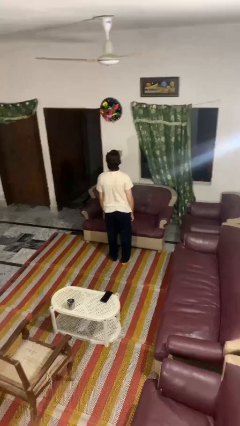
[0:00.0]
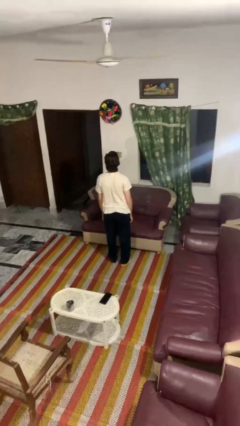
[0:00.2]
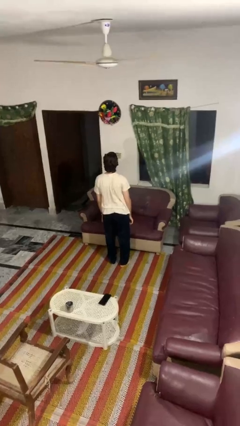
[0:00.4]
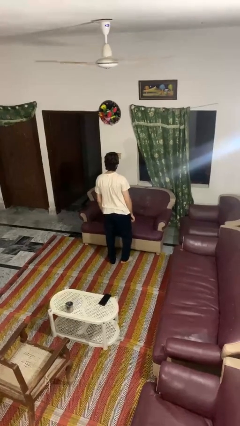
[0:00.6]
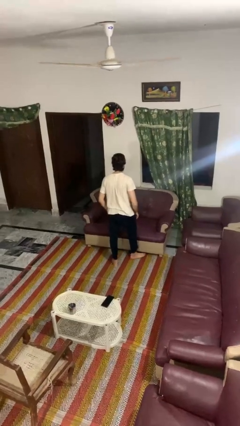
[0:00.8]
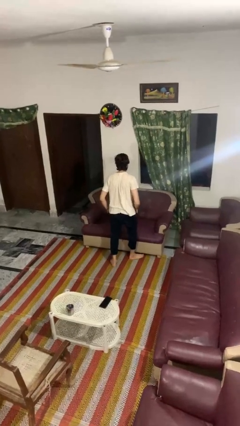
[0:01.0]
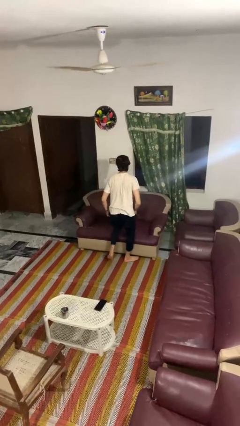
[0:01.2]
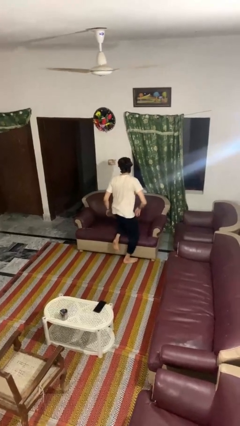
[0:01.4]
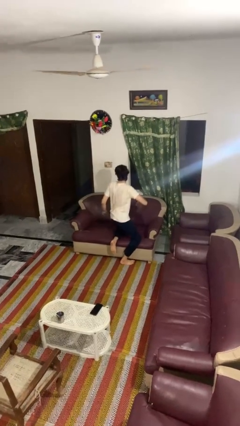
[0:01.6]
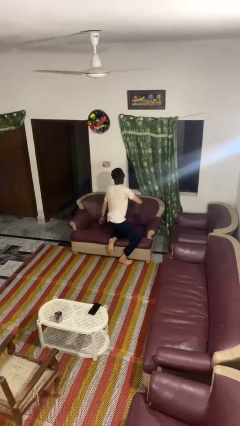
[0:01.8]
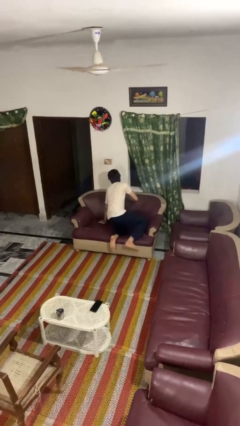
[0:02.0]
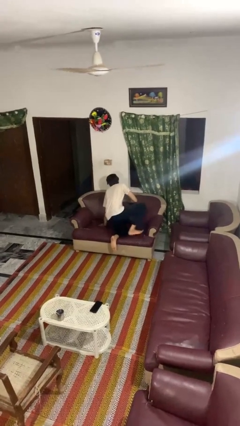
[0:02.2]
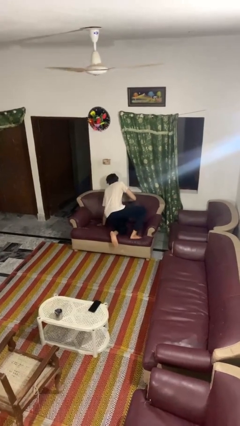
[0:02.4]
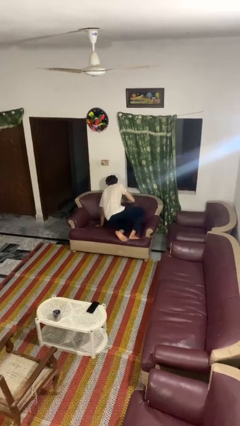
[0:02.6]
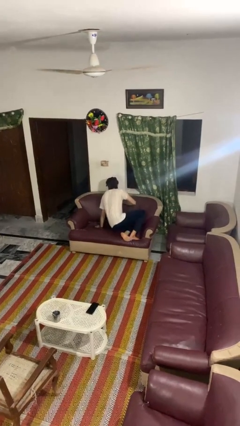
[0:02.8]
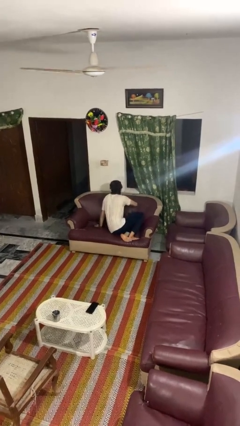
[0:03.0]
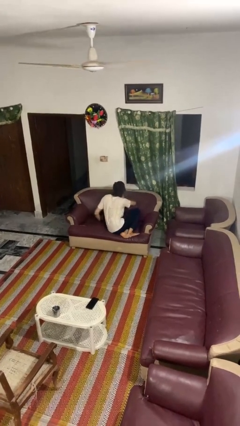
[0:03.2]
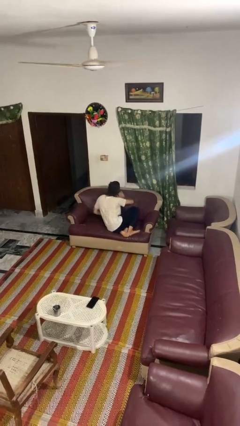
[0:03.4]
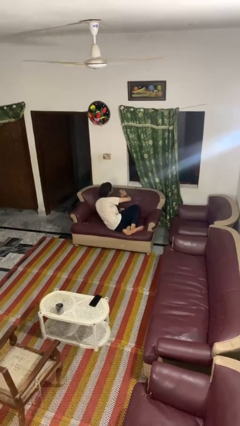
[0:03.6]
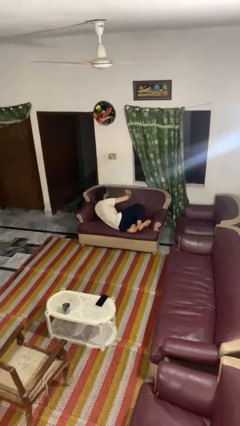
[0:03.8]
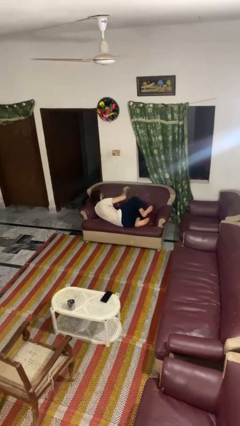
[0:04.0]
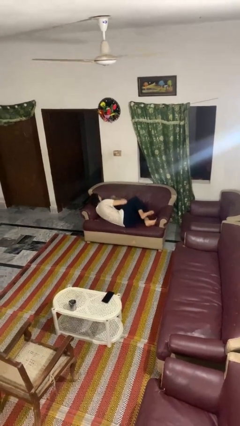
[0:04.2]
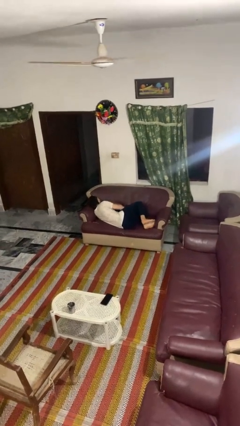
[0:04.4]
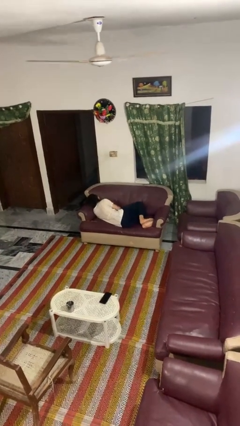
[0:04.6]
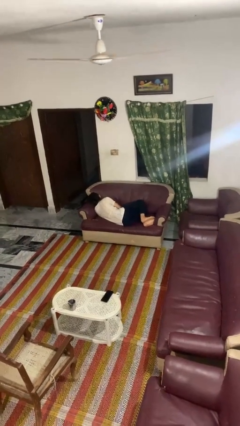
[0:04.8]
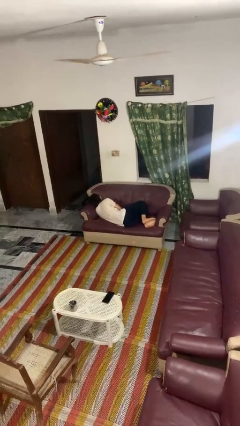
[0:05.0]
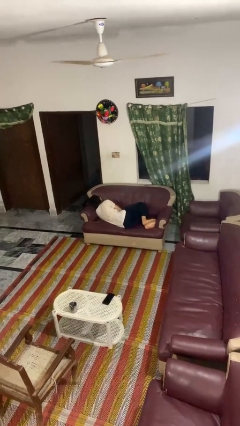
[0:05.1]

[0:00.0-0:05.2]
person lies down on couch

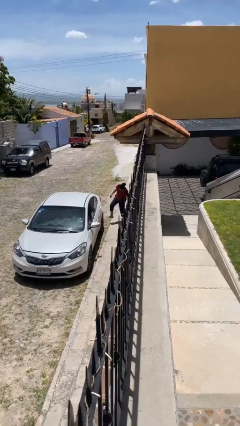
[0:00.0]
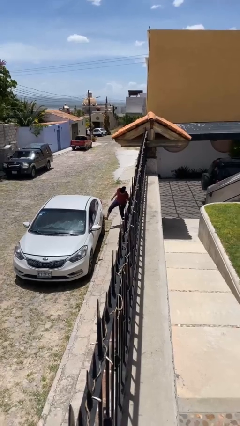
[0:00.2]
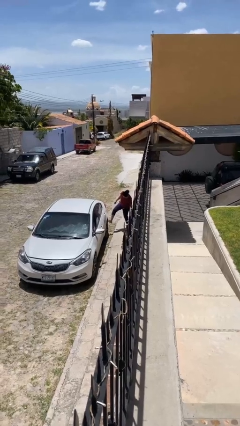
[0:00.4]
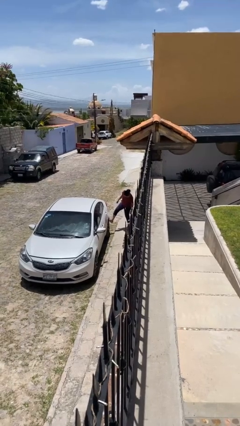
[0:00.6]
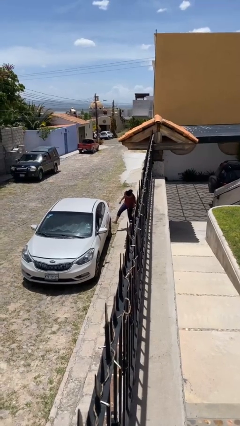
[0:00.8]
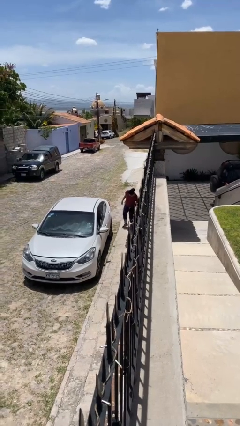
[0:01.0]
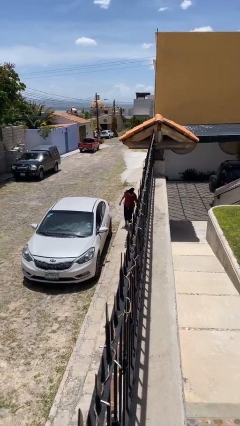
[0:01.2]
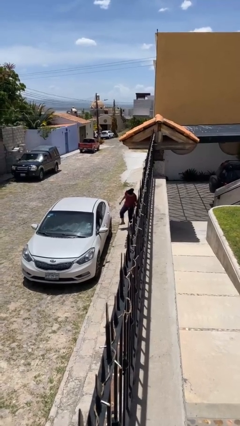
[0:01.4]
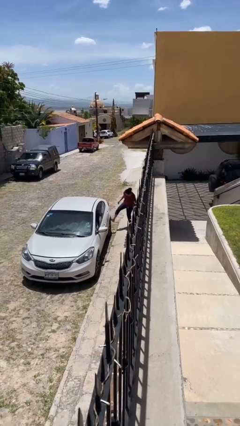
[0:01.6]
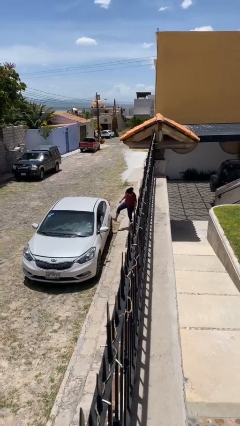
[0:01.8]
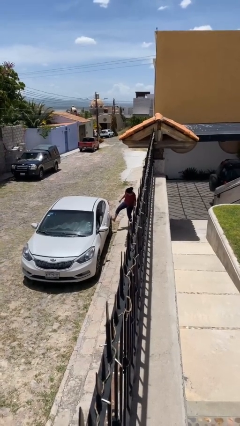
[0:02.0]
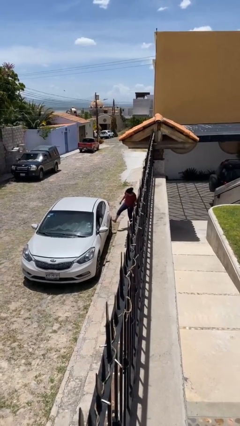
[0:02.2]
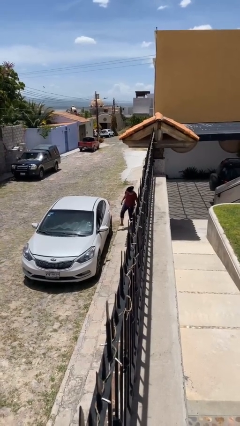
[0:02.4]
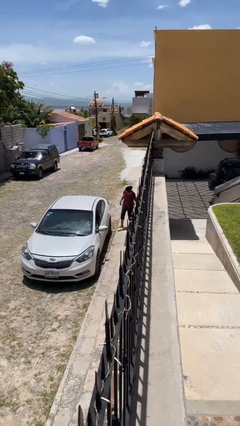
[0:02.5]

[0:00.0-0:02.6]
person kicks car tires

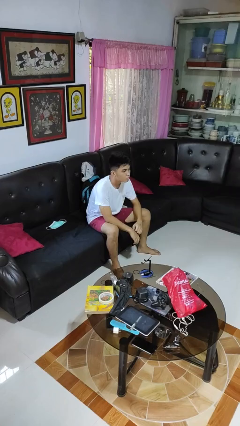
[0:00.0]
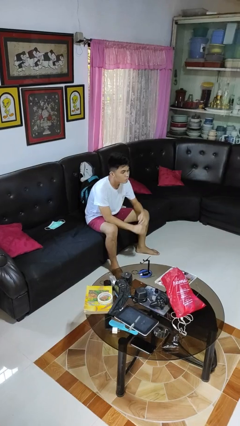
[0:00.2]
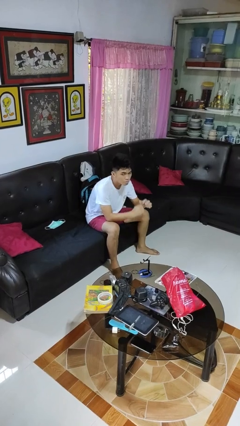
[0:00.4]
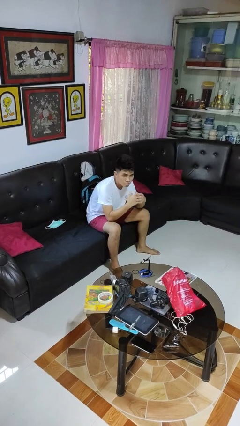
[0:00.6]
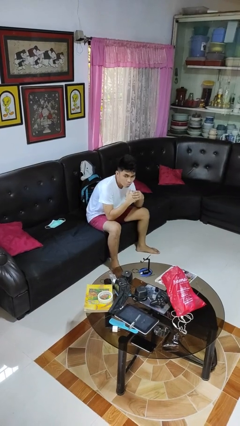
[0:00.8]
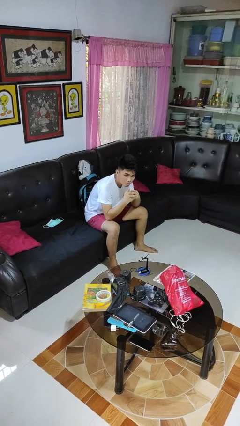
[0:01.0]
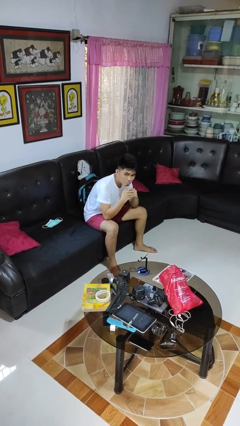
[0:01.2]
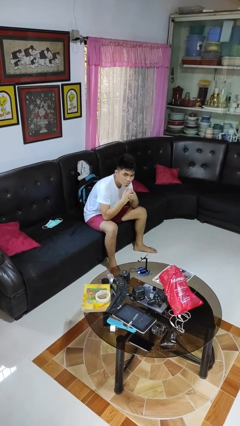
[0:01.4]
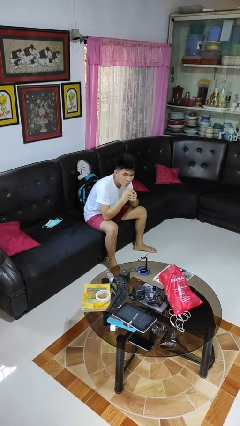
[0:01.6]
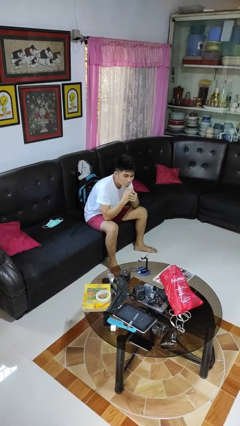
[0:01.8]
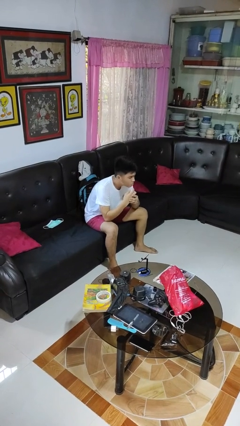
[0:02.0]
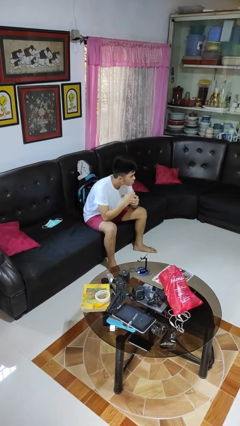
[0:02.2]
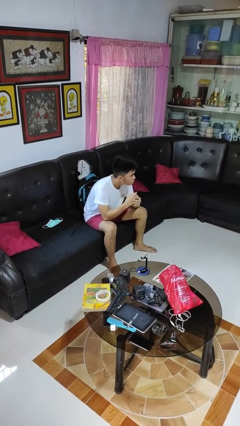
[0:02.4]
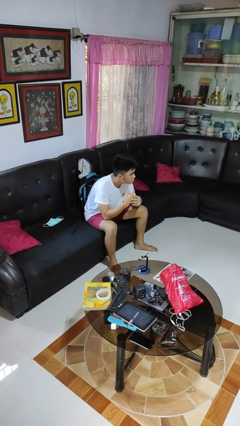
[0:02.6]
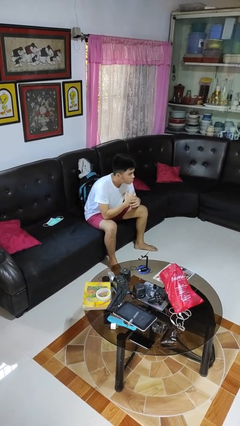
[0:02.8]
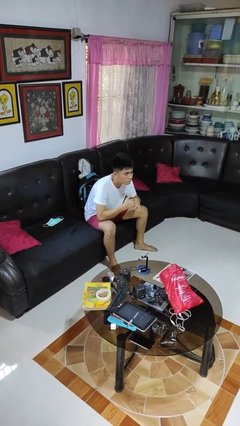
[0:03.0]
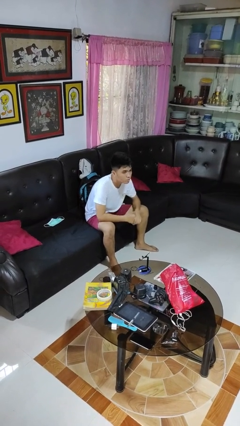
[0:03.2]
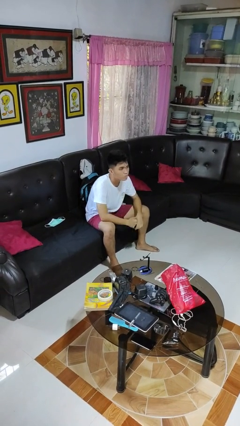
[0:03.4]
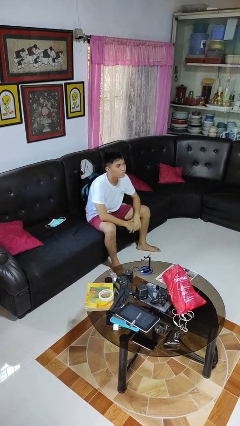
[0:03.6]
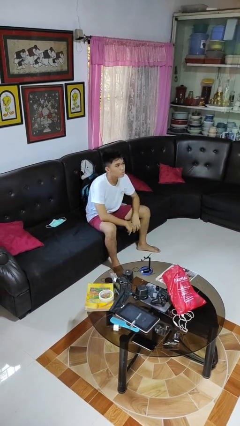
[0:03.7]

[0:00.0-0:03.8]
person cracks knuckles

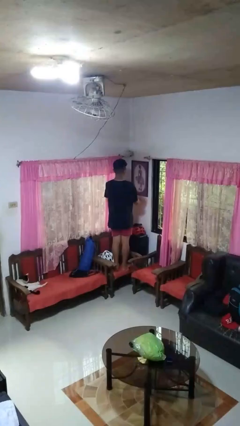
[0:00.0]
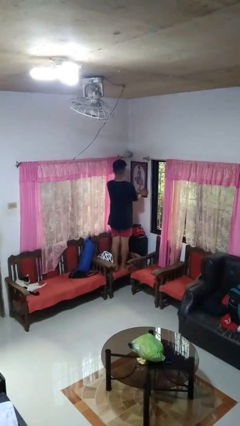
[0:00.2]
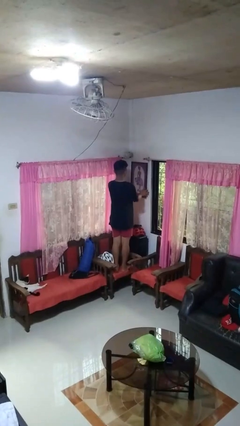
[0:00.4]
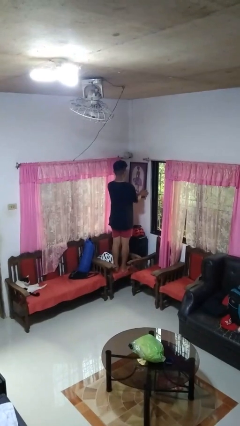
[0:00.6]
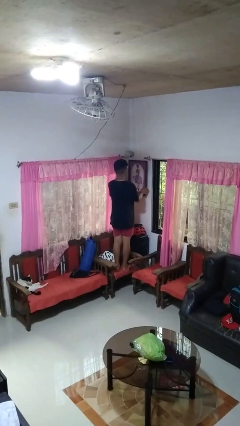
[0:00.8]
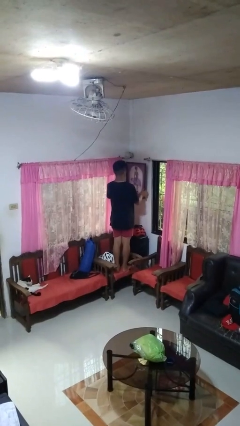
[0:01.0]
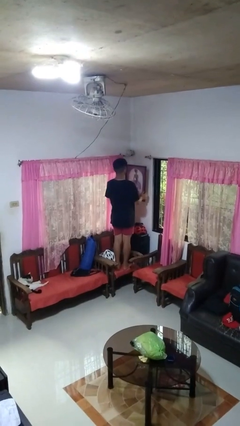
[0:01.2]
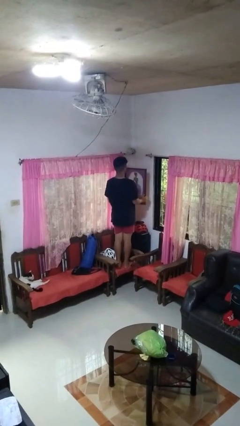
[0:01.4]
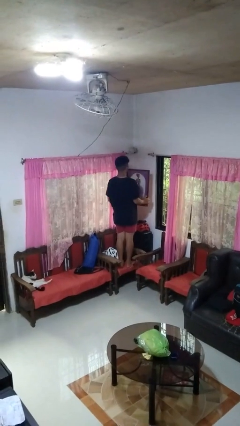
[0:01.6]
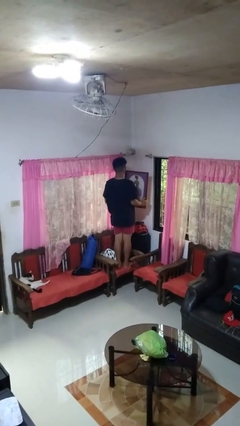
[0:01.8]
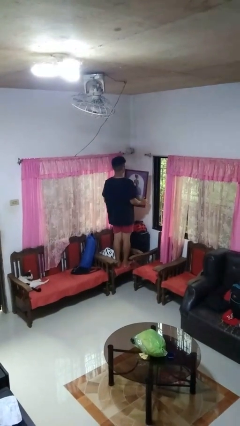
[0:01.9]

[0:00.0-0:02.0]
person takes down picture frame

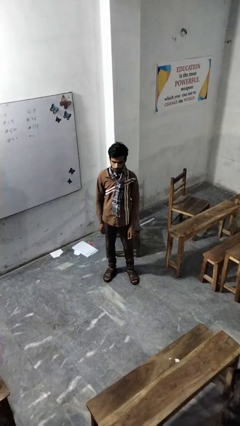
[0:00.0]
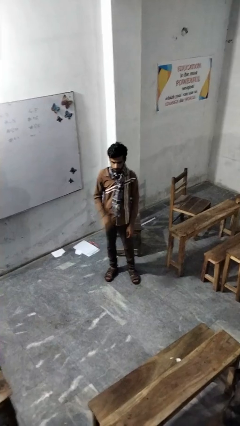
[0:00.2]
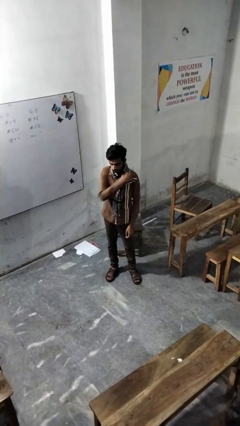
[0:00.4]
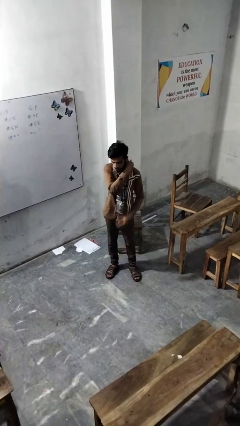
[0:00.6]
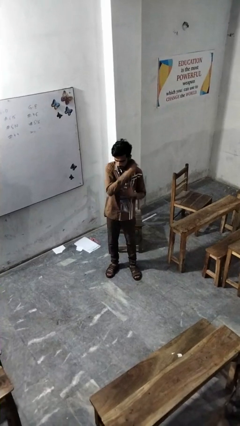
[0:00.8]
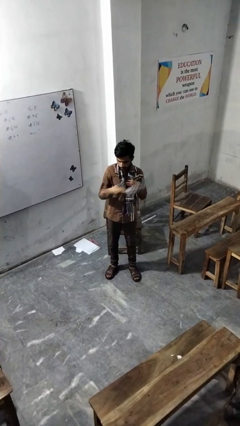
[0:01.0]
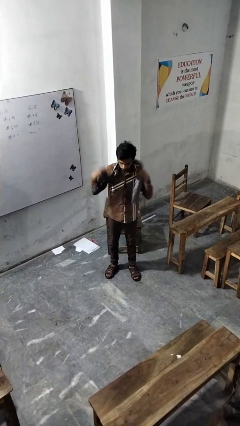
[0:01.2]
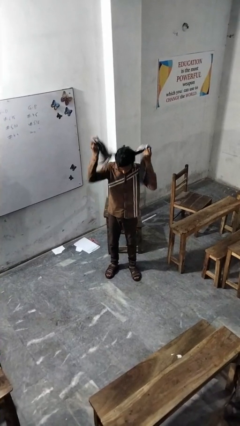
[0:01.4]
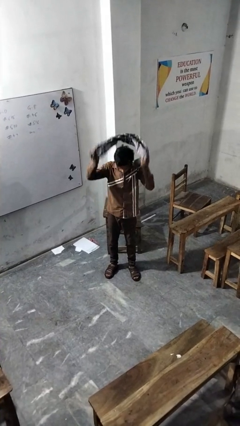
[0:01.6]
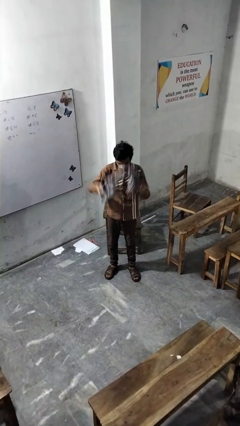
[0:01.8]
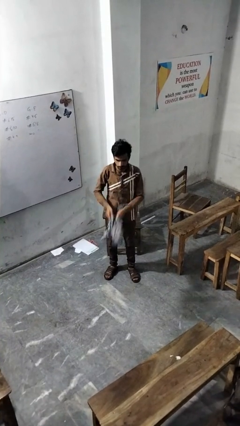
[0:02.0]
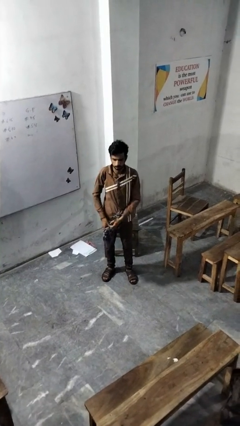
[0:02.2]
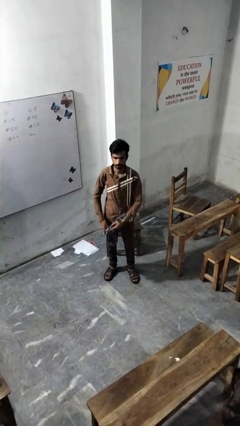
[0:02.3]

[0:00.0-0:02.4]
person takes off scarf

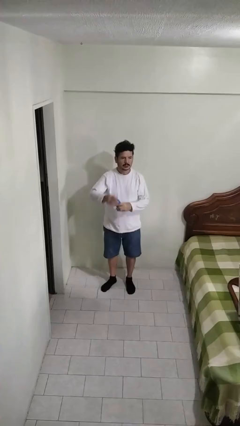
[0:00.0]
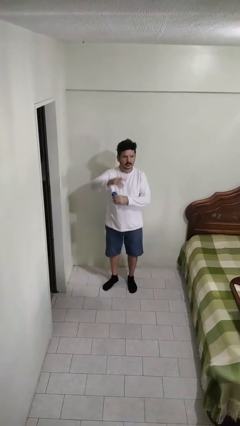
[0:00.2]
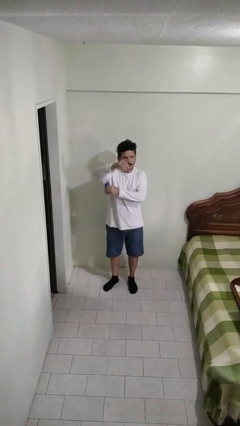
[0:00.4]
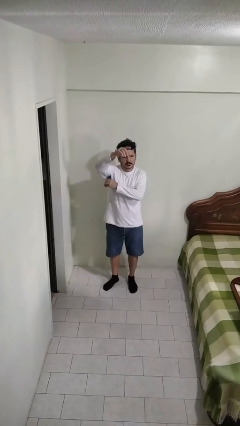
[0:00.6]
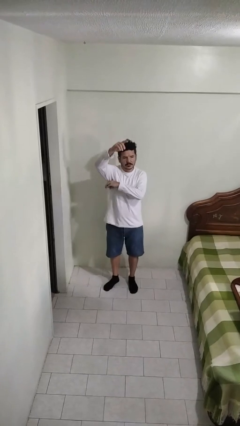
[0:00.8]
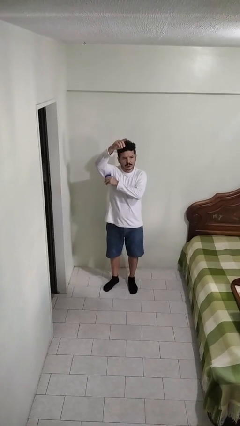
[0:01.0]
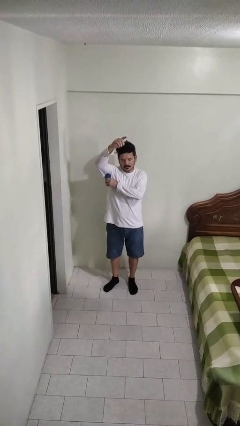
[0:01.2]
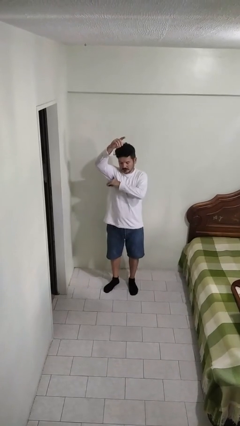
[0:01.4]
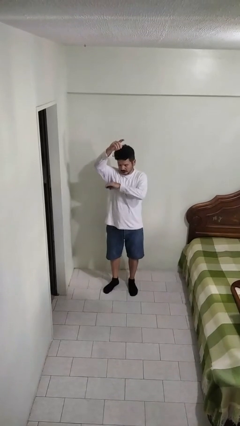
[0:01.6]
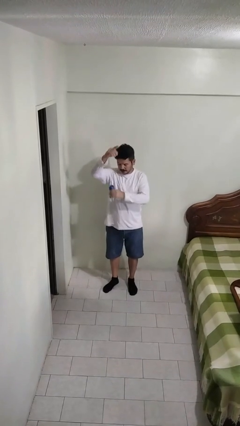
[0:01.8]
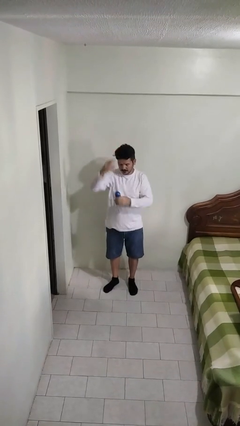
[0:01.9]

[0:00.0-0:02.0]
person applies deodorant
